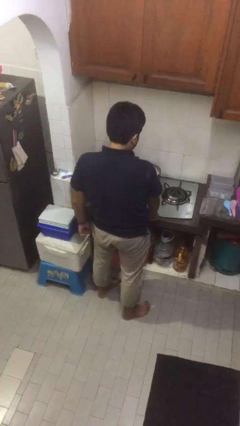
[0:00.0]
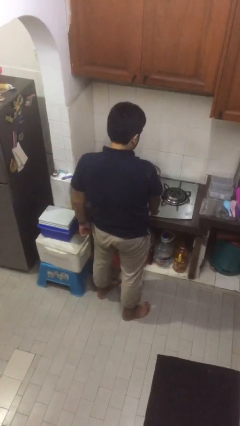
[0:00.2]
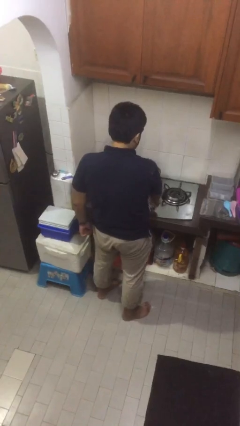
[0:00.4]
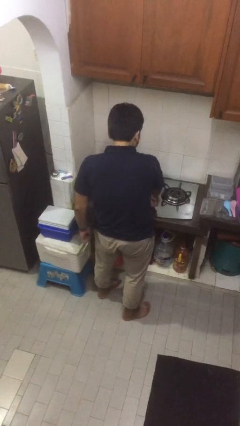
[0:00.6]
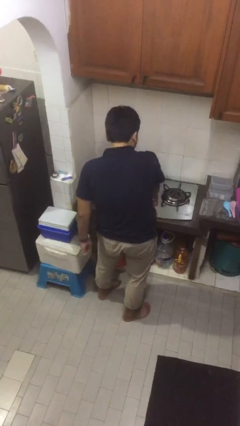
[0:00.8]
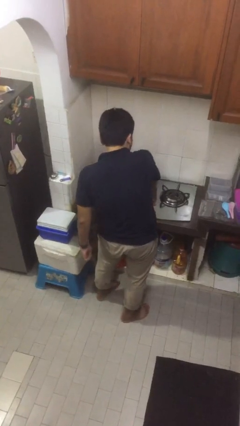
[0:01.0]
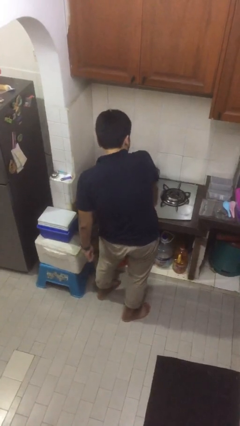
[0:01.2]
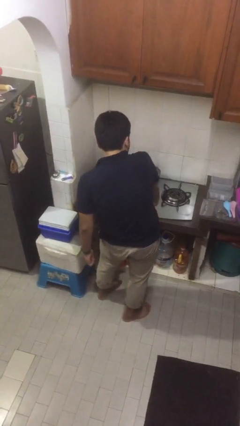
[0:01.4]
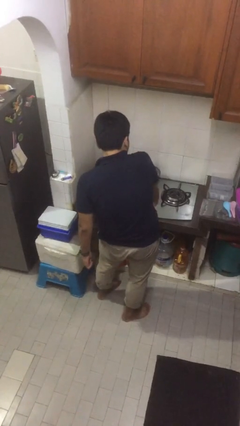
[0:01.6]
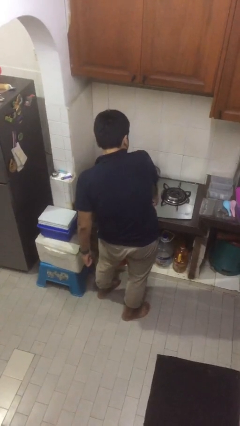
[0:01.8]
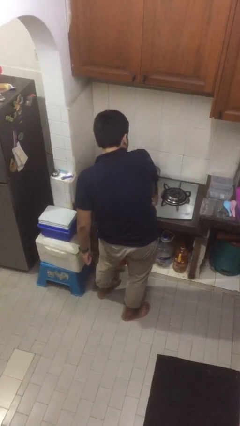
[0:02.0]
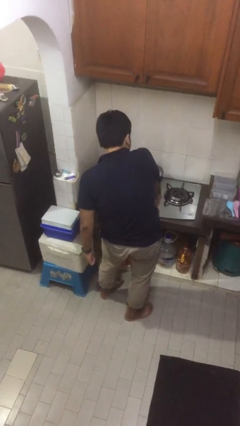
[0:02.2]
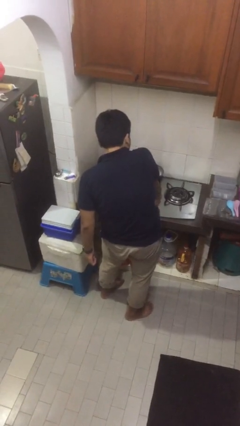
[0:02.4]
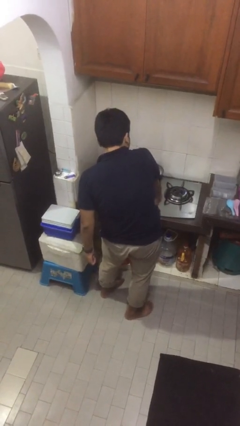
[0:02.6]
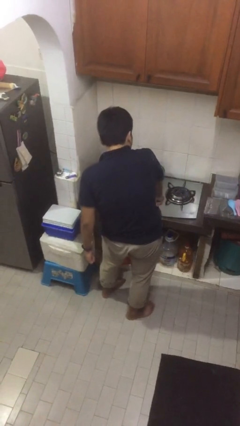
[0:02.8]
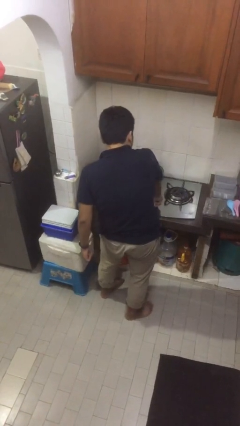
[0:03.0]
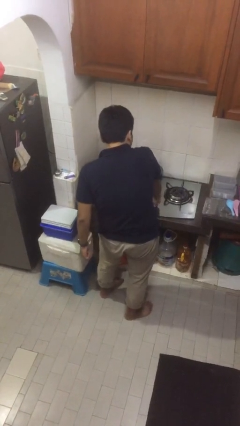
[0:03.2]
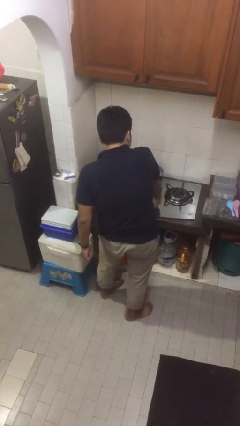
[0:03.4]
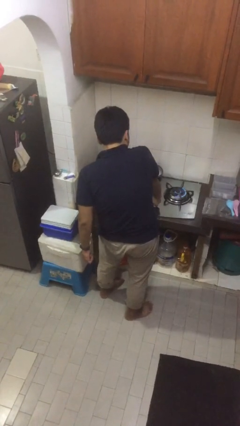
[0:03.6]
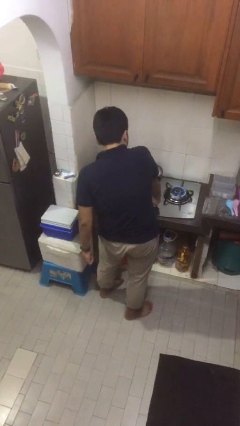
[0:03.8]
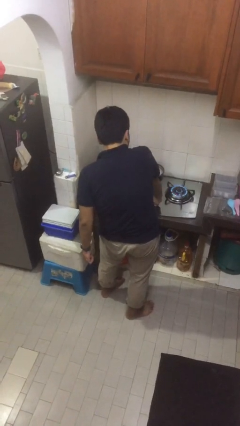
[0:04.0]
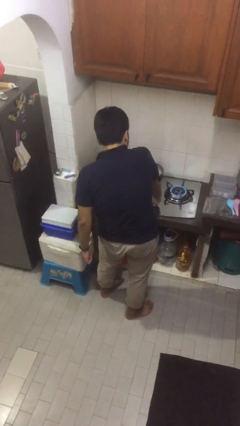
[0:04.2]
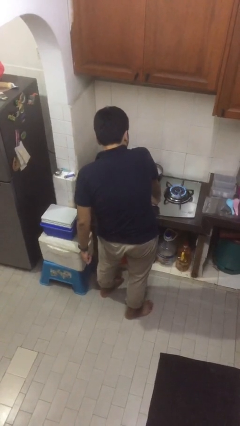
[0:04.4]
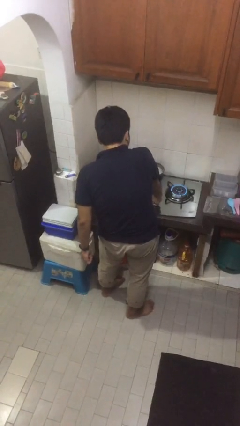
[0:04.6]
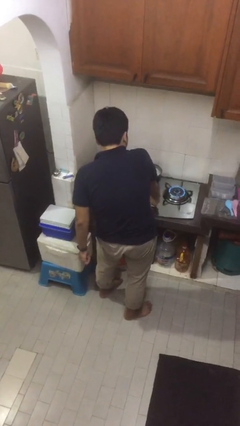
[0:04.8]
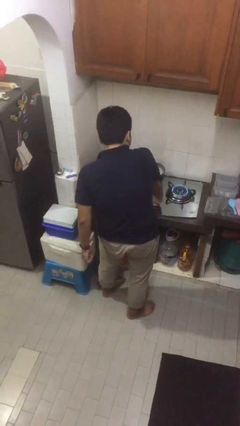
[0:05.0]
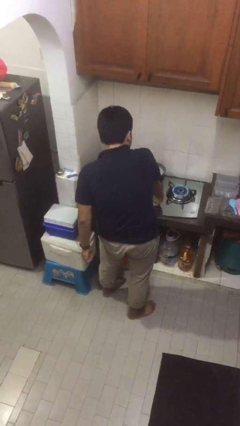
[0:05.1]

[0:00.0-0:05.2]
person turns on stovetop

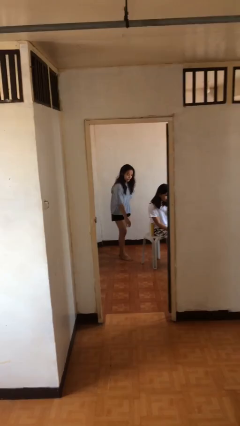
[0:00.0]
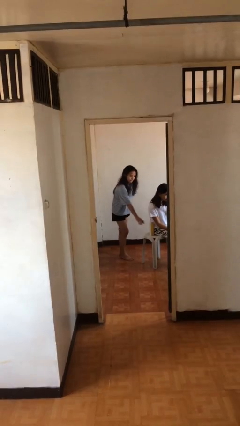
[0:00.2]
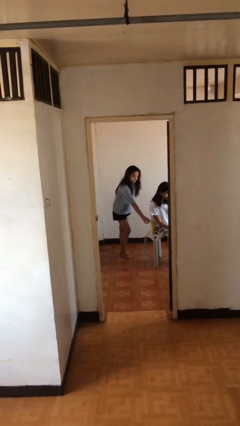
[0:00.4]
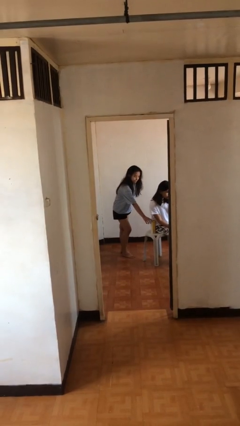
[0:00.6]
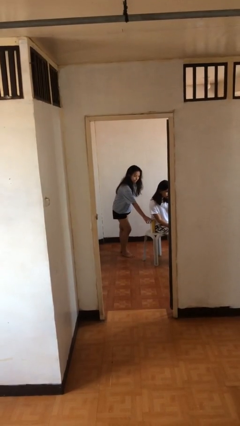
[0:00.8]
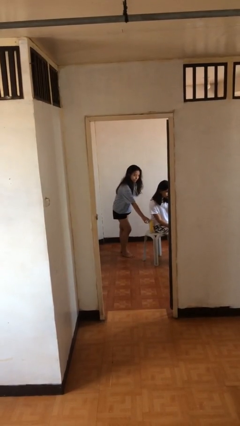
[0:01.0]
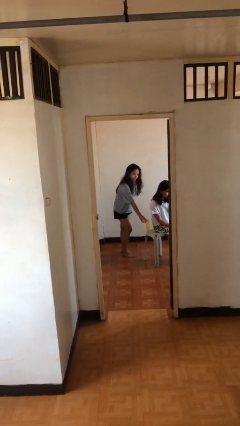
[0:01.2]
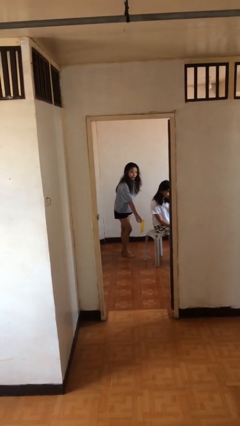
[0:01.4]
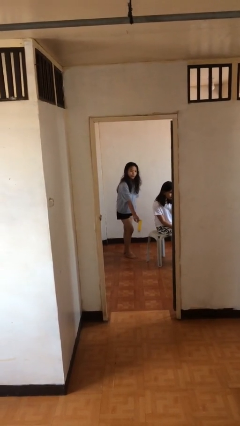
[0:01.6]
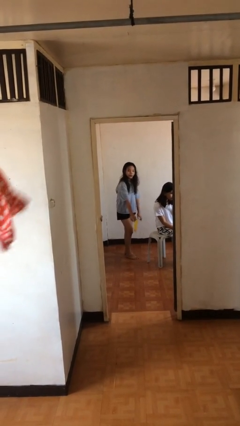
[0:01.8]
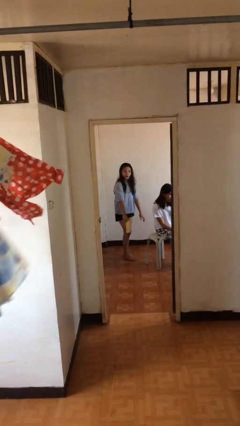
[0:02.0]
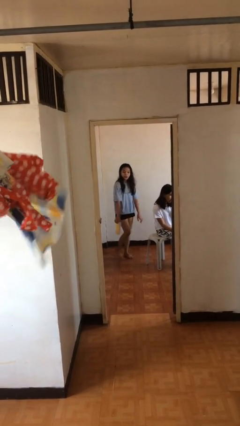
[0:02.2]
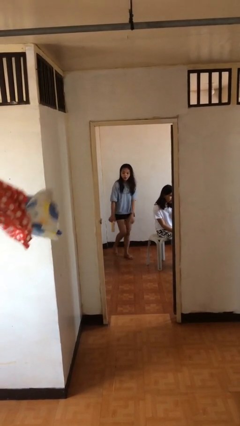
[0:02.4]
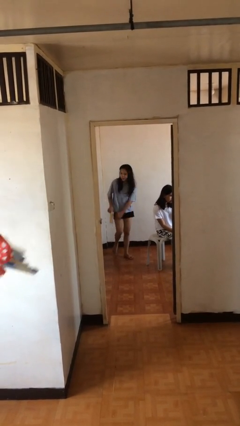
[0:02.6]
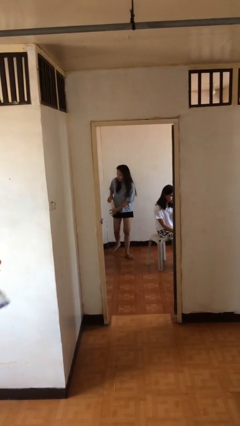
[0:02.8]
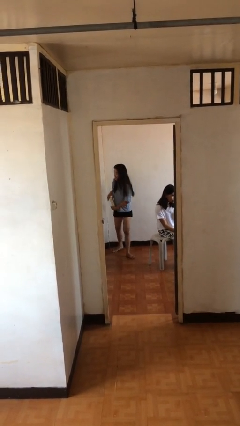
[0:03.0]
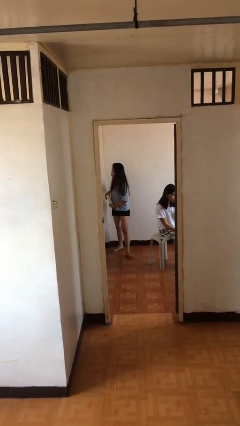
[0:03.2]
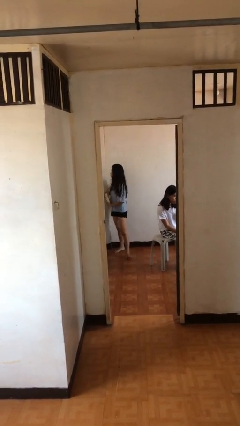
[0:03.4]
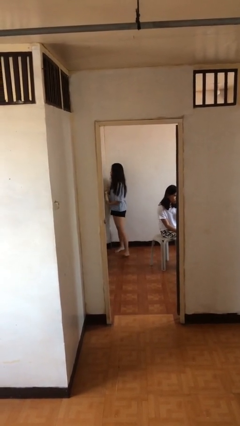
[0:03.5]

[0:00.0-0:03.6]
person steals object from person

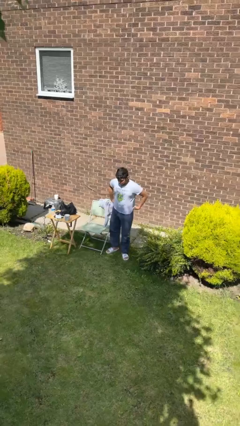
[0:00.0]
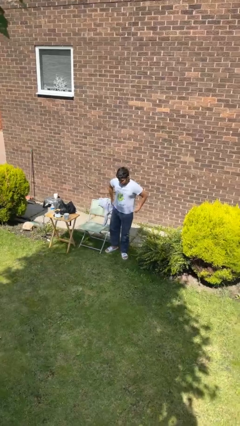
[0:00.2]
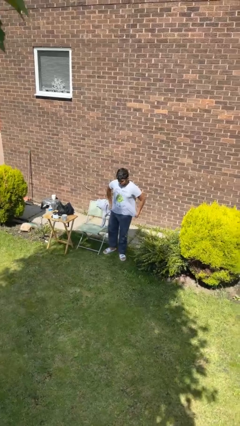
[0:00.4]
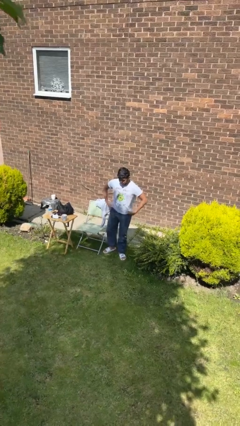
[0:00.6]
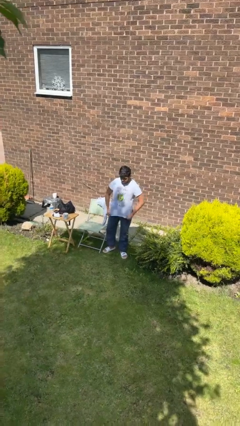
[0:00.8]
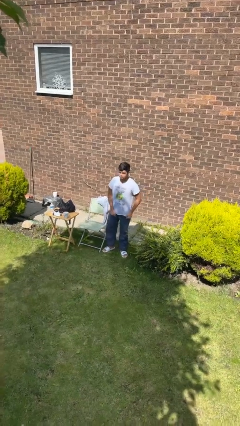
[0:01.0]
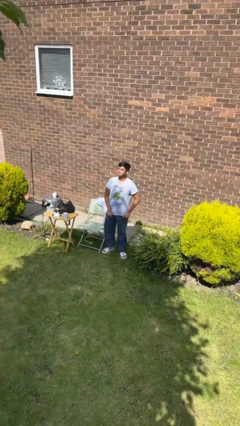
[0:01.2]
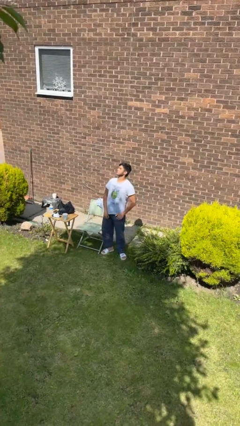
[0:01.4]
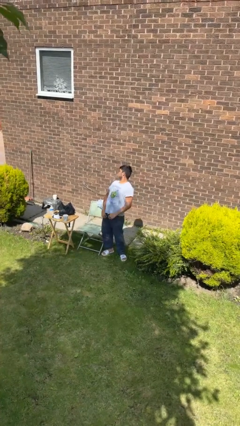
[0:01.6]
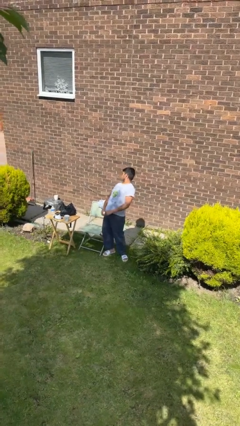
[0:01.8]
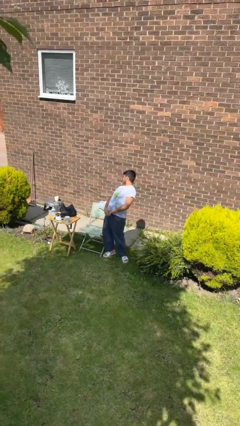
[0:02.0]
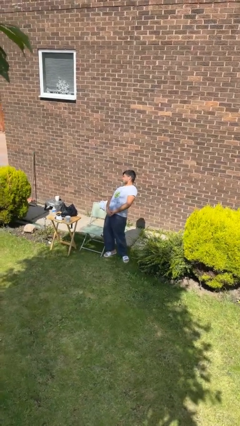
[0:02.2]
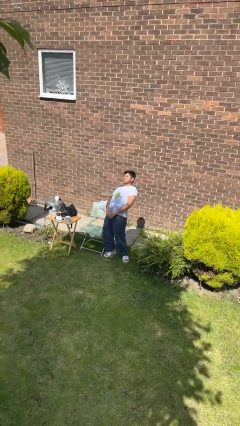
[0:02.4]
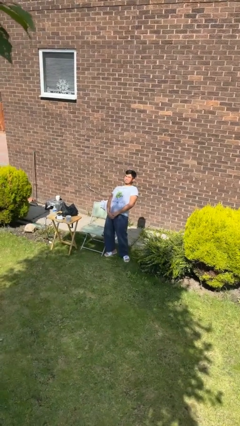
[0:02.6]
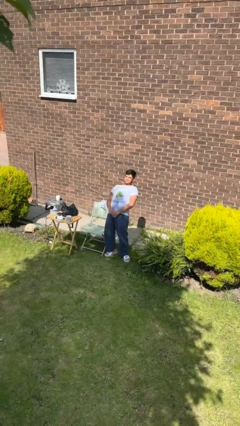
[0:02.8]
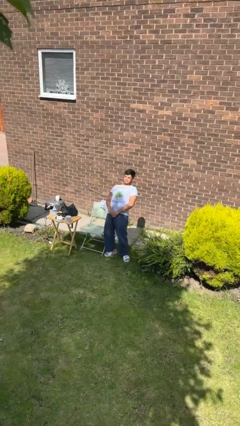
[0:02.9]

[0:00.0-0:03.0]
person stretches back

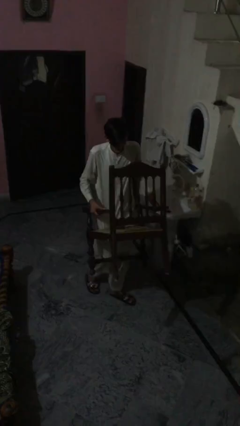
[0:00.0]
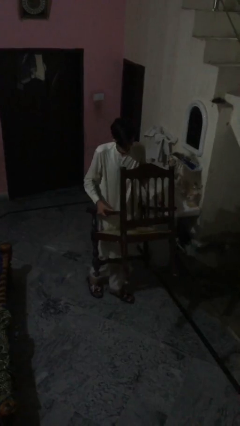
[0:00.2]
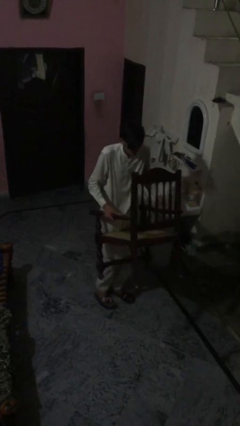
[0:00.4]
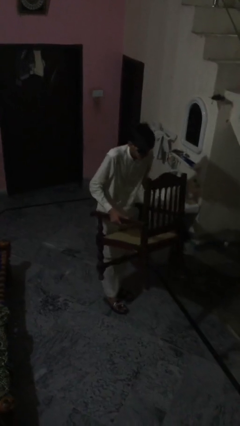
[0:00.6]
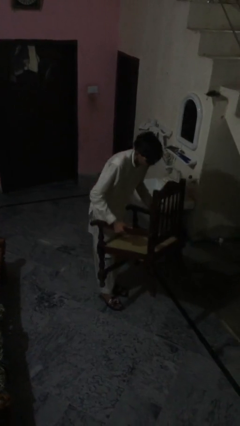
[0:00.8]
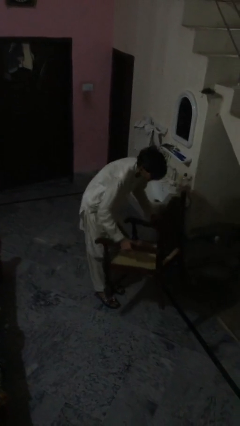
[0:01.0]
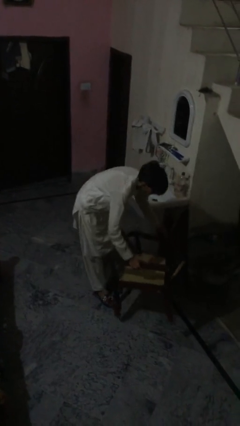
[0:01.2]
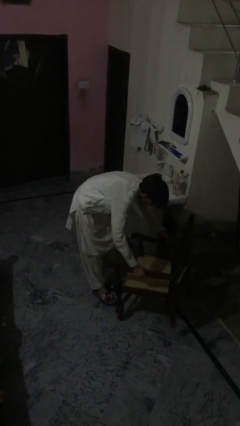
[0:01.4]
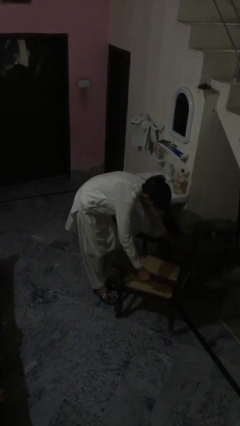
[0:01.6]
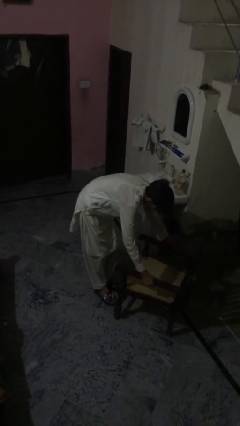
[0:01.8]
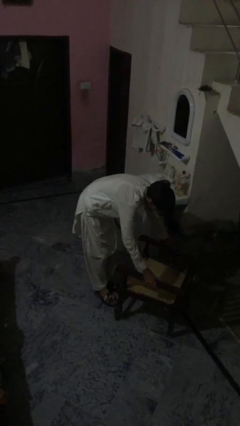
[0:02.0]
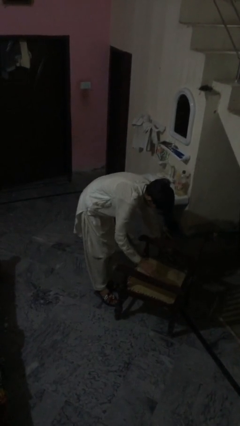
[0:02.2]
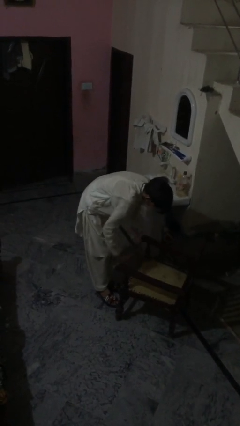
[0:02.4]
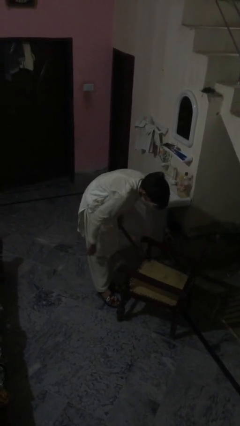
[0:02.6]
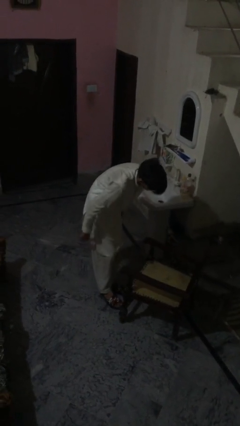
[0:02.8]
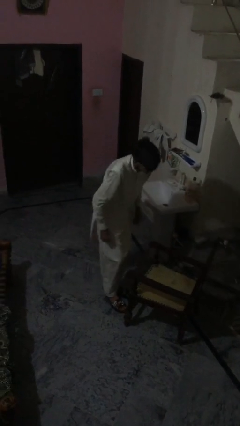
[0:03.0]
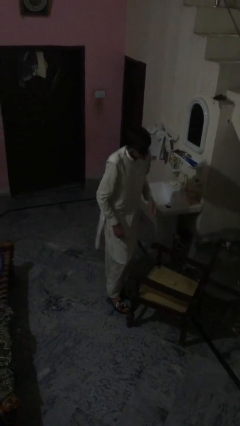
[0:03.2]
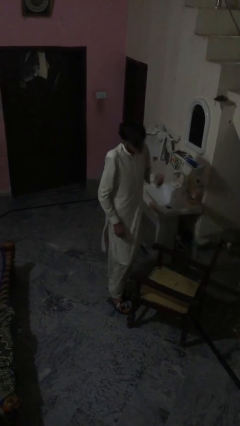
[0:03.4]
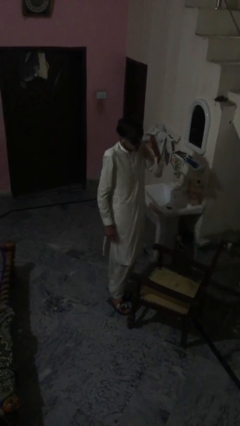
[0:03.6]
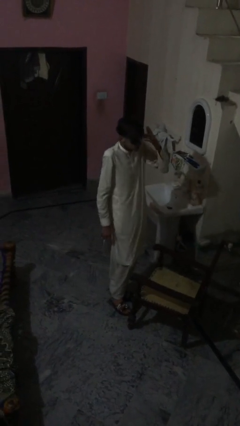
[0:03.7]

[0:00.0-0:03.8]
person puts down object on floor

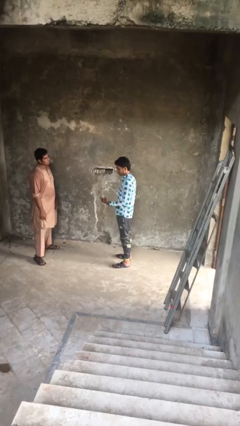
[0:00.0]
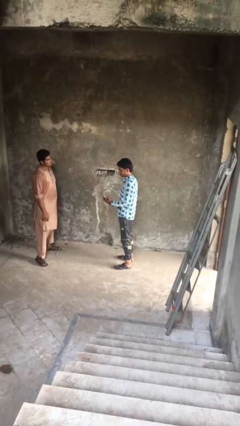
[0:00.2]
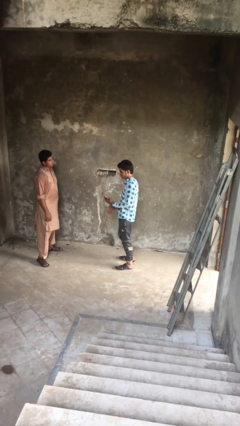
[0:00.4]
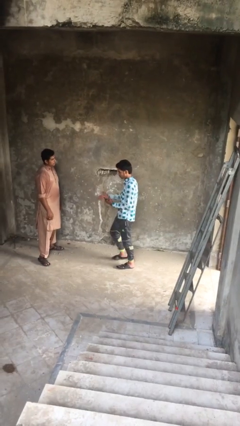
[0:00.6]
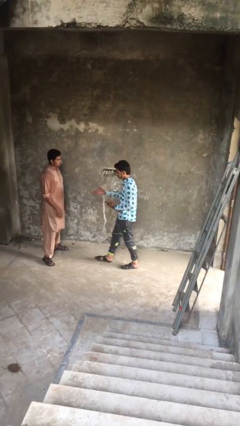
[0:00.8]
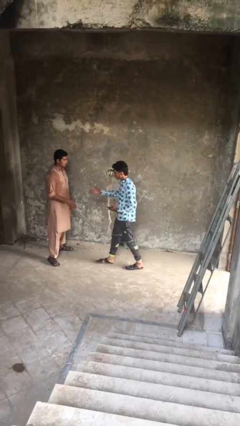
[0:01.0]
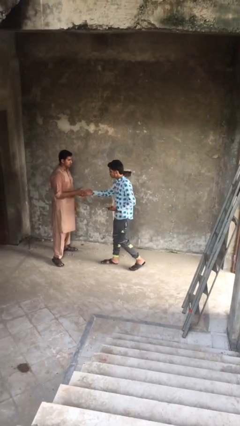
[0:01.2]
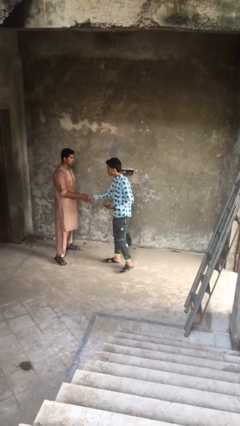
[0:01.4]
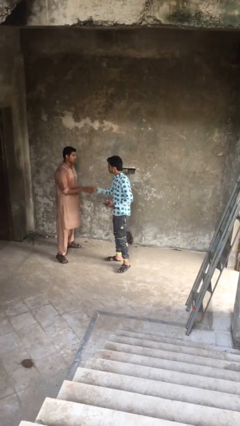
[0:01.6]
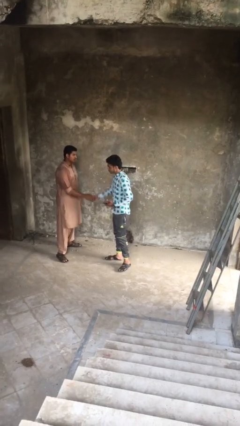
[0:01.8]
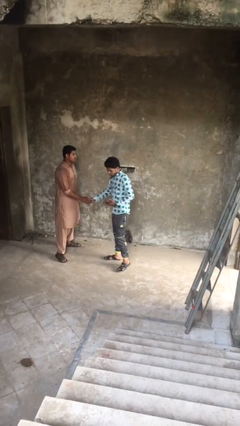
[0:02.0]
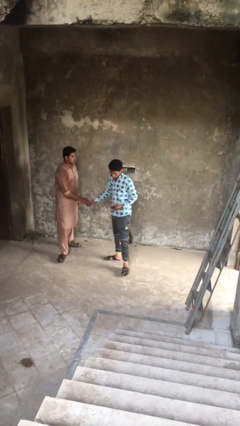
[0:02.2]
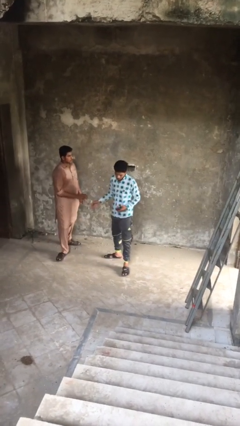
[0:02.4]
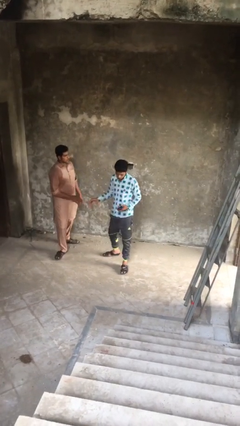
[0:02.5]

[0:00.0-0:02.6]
person shakes hand
